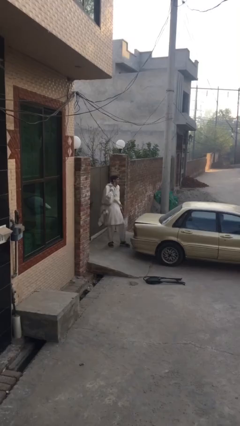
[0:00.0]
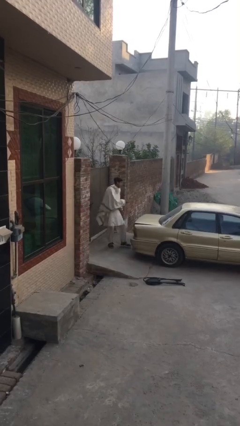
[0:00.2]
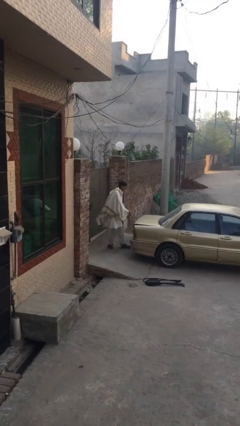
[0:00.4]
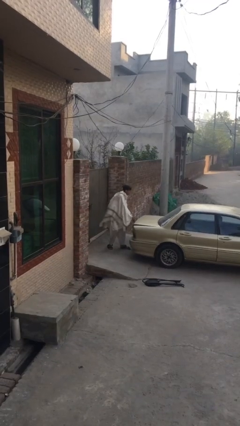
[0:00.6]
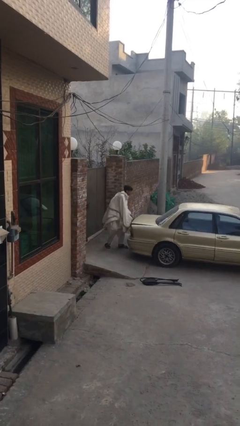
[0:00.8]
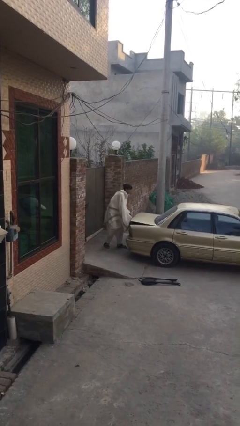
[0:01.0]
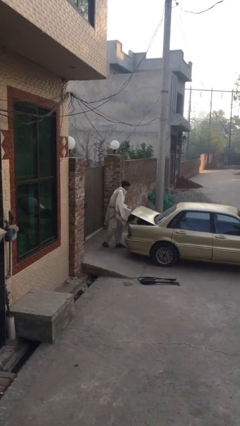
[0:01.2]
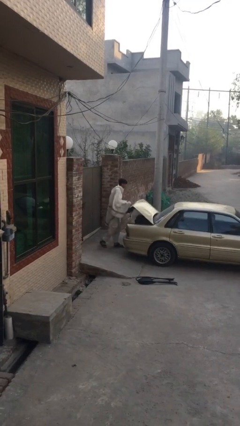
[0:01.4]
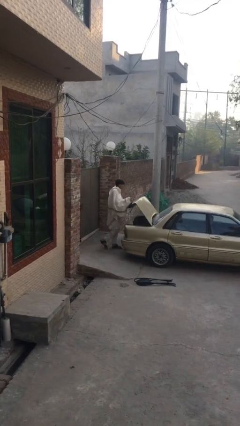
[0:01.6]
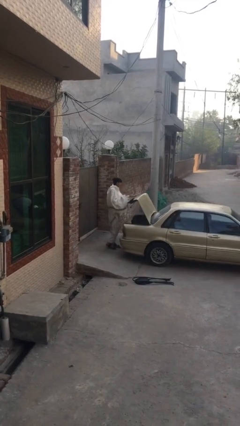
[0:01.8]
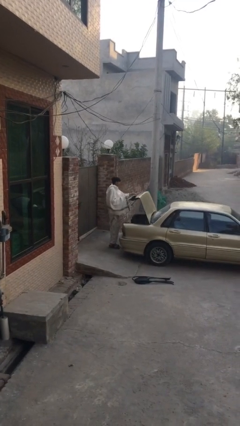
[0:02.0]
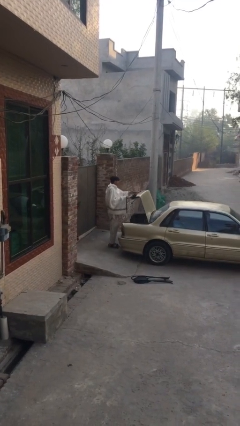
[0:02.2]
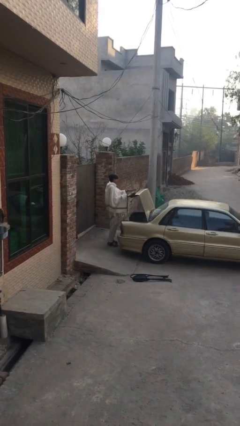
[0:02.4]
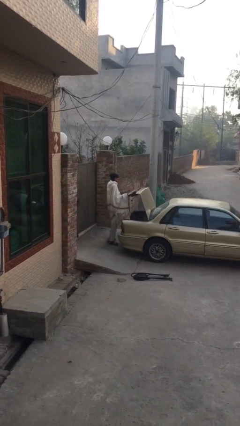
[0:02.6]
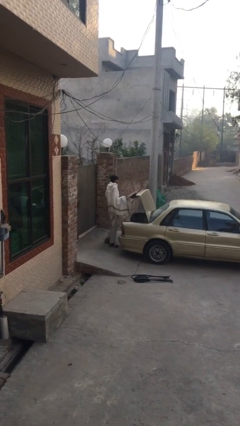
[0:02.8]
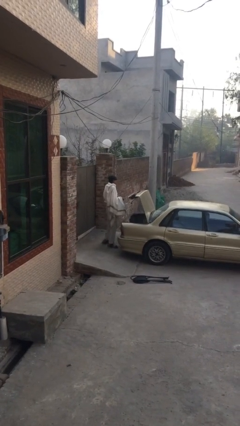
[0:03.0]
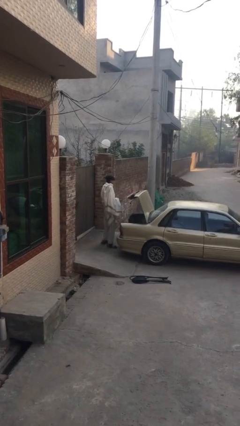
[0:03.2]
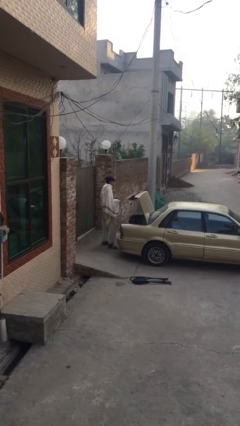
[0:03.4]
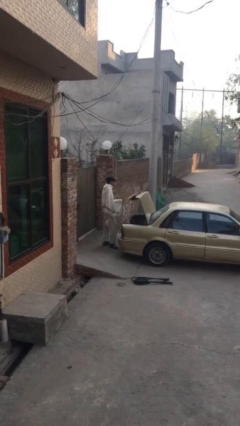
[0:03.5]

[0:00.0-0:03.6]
person opens car trunk

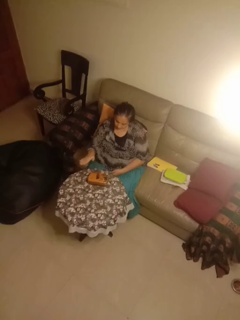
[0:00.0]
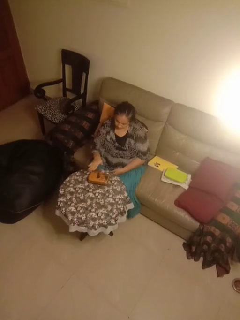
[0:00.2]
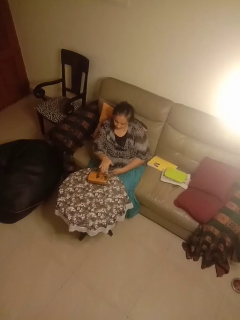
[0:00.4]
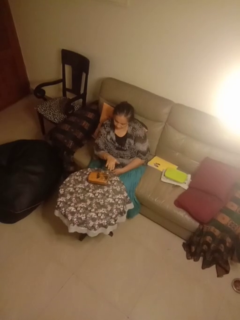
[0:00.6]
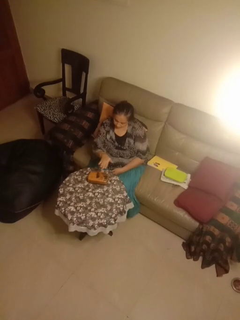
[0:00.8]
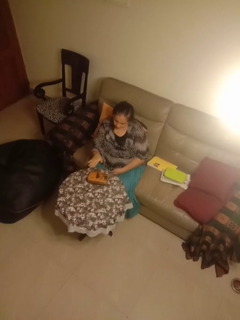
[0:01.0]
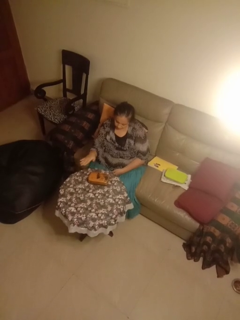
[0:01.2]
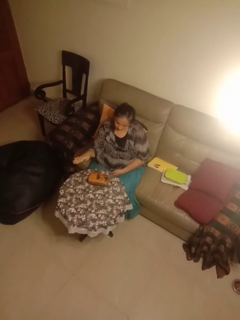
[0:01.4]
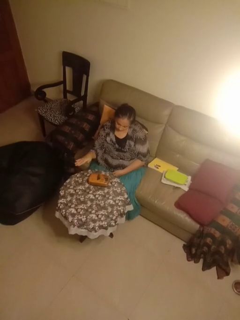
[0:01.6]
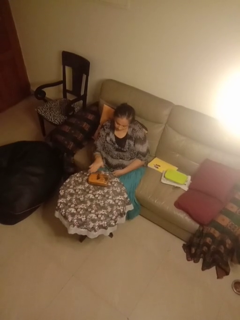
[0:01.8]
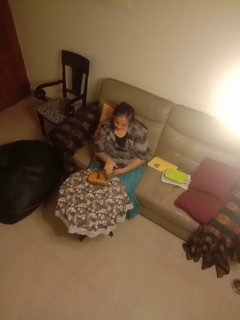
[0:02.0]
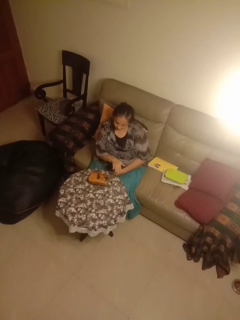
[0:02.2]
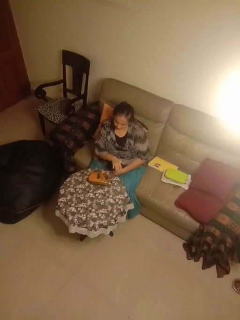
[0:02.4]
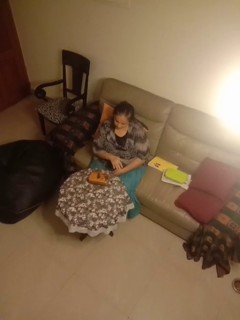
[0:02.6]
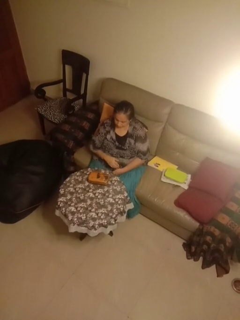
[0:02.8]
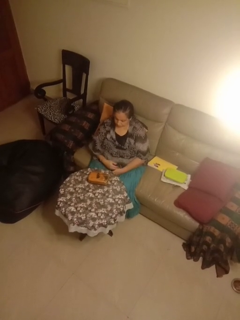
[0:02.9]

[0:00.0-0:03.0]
person waves hand over object

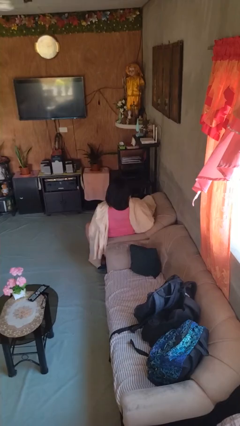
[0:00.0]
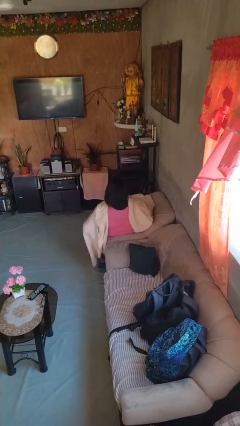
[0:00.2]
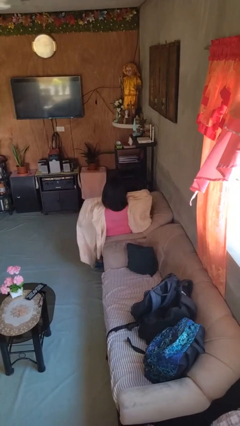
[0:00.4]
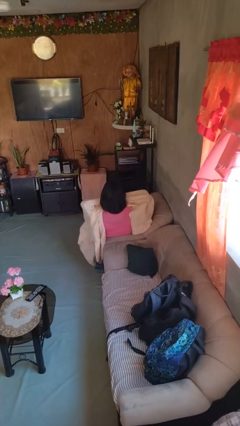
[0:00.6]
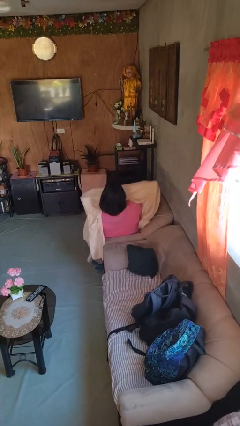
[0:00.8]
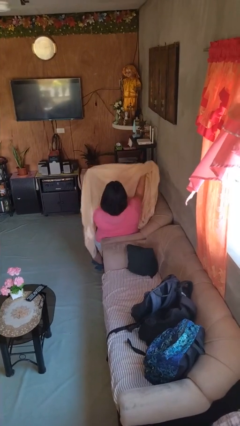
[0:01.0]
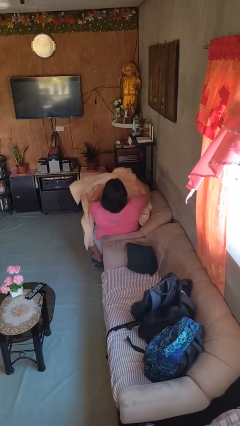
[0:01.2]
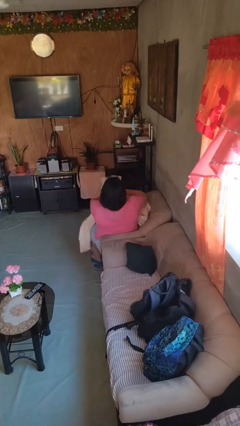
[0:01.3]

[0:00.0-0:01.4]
person uncovers with blanket

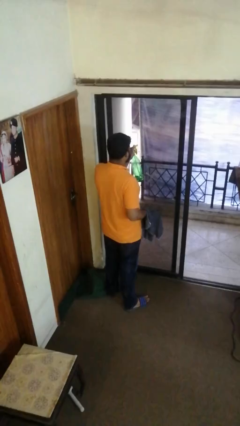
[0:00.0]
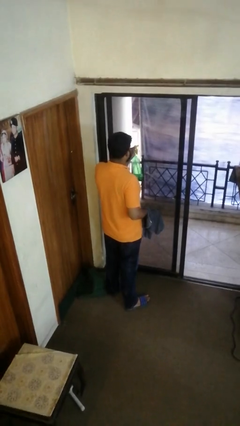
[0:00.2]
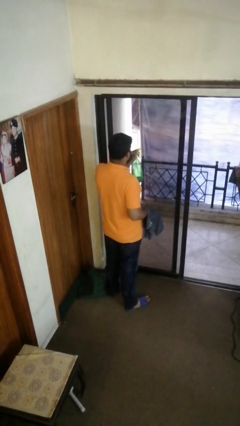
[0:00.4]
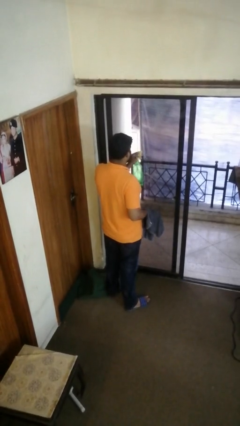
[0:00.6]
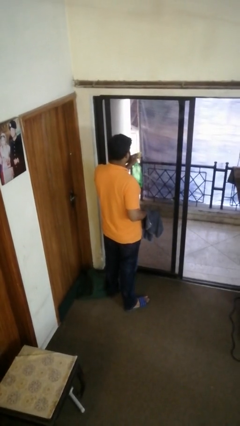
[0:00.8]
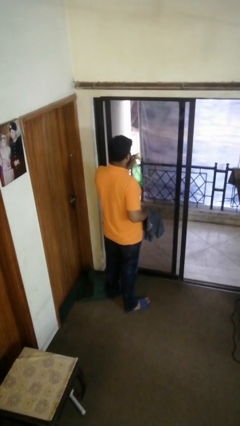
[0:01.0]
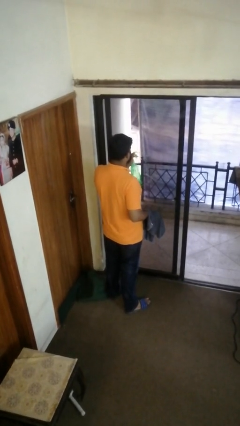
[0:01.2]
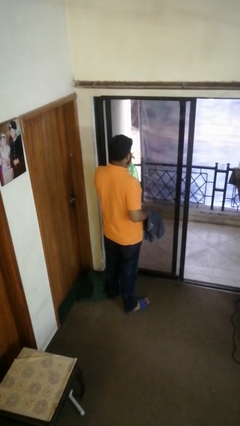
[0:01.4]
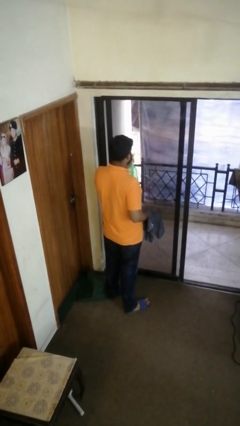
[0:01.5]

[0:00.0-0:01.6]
person sprays from bottle

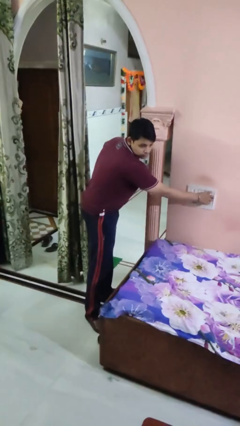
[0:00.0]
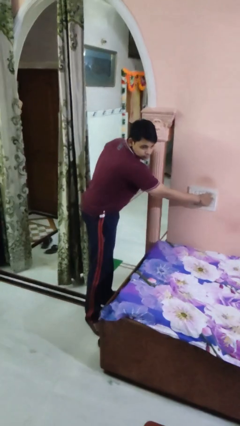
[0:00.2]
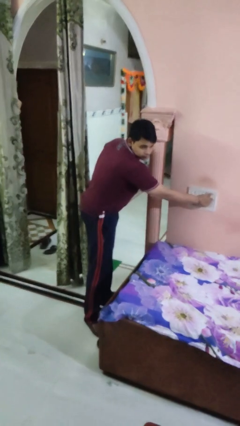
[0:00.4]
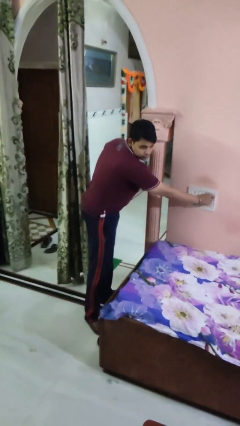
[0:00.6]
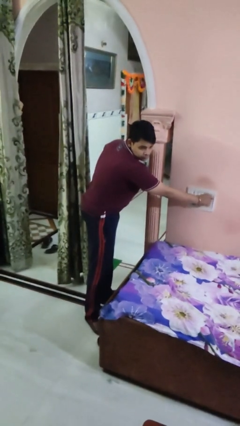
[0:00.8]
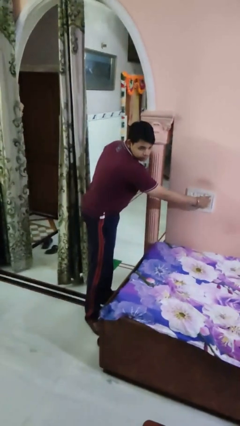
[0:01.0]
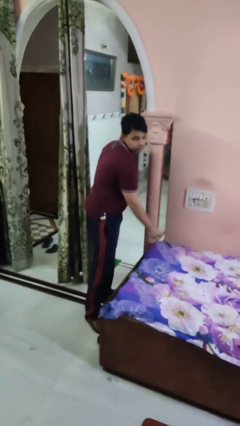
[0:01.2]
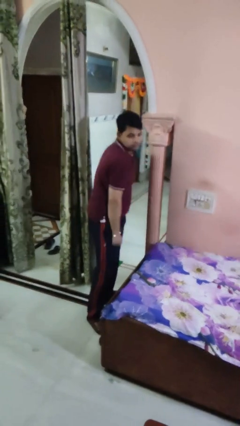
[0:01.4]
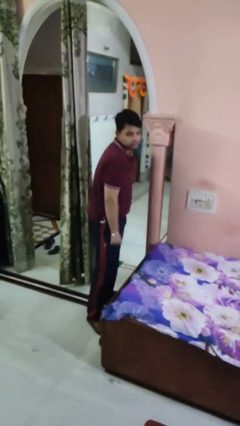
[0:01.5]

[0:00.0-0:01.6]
person adjusts thermostat

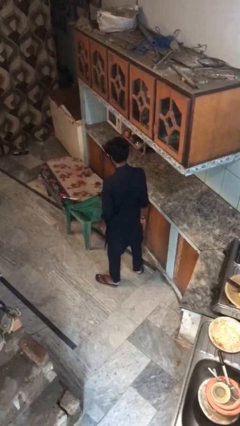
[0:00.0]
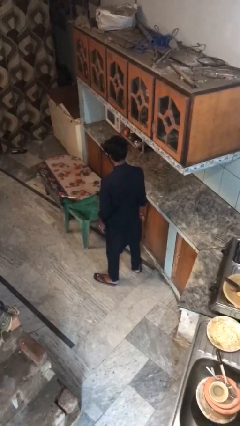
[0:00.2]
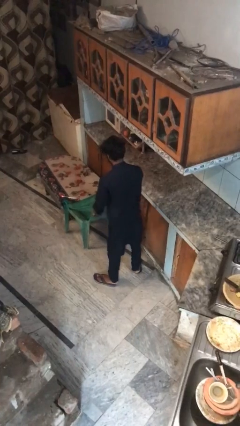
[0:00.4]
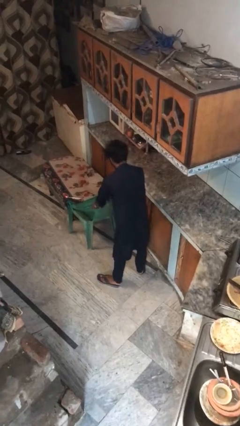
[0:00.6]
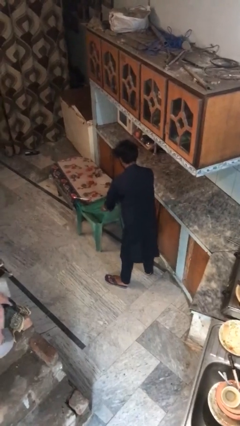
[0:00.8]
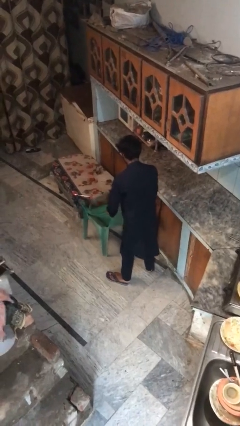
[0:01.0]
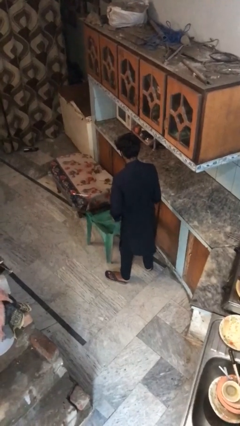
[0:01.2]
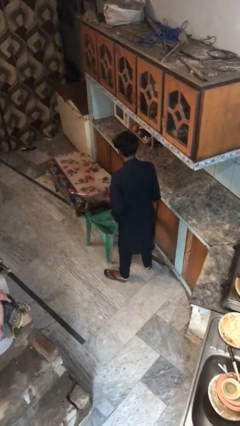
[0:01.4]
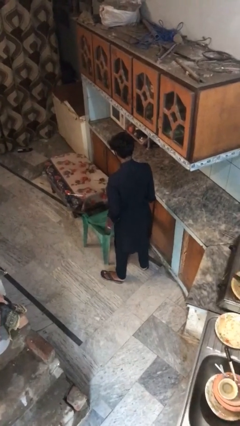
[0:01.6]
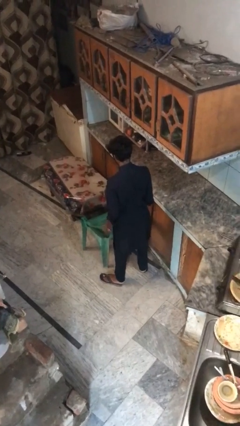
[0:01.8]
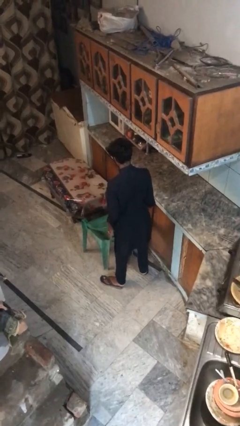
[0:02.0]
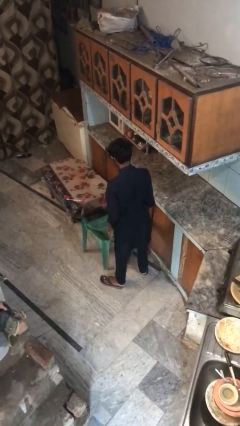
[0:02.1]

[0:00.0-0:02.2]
person pulls out chair

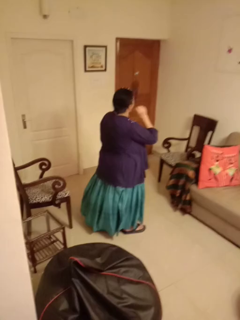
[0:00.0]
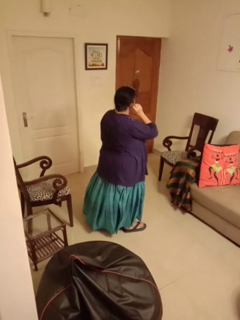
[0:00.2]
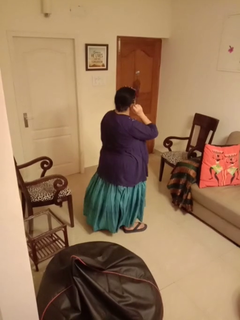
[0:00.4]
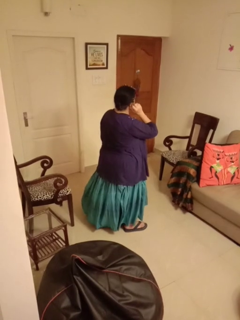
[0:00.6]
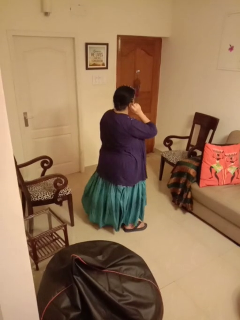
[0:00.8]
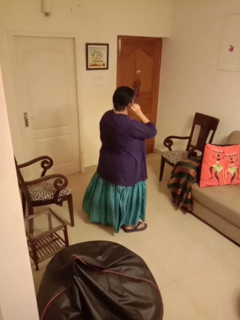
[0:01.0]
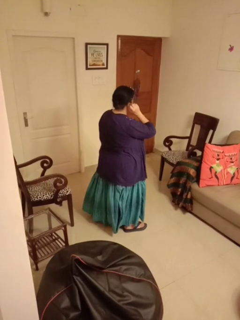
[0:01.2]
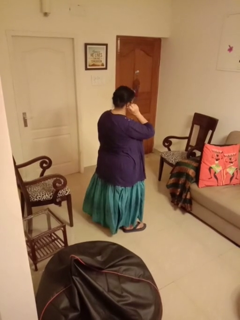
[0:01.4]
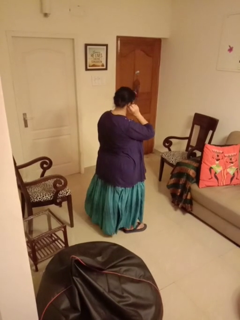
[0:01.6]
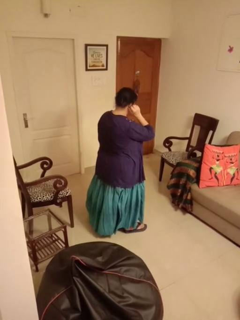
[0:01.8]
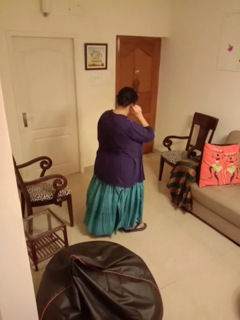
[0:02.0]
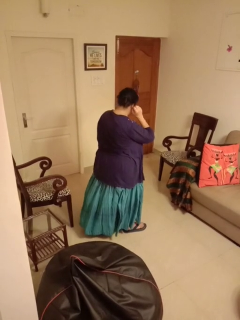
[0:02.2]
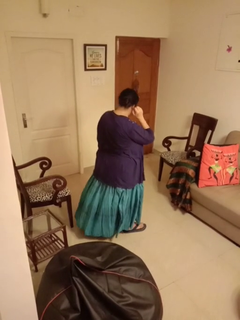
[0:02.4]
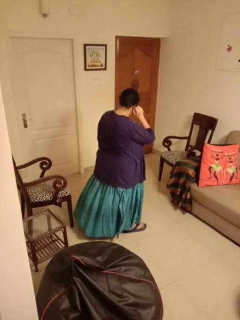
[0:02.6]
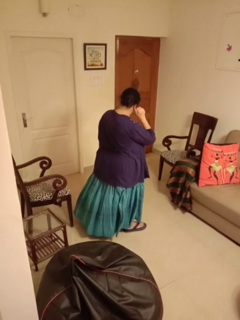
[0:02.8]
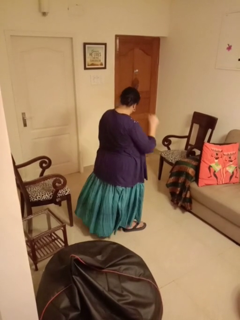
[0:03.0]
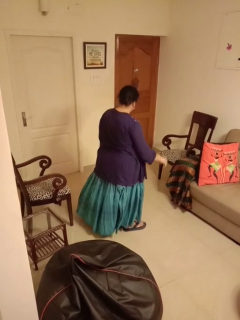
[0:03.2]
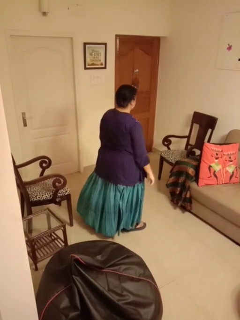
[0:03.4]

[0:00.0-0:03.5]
person touches earlobe

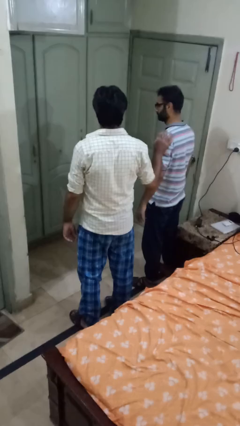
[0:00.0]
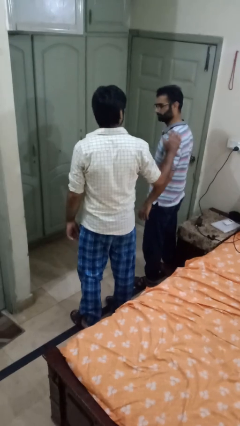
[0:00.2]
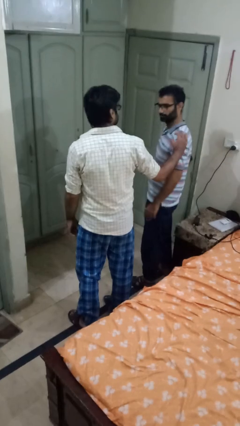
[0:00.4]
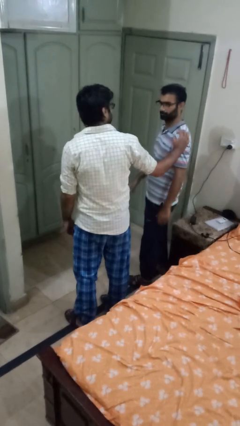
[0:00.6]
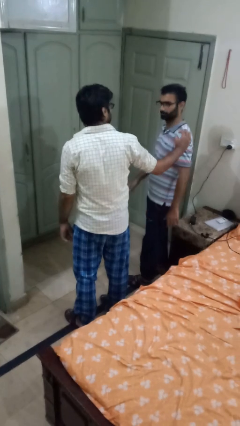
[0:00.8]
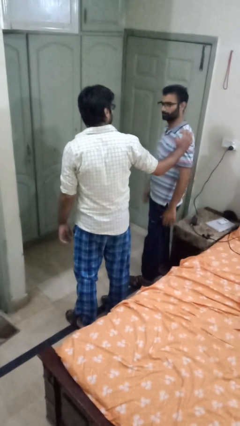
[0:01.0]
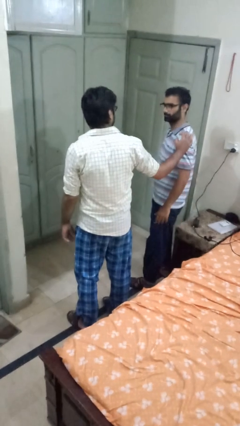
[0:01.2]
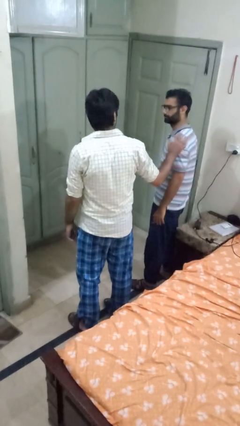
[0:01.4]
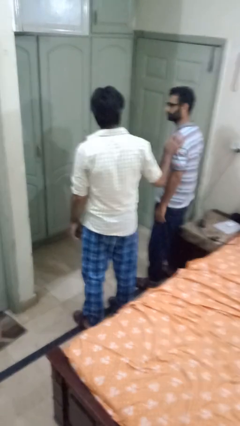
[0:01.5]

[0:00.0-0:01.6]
person spins person around
